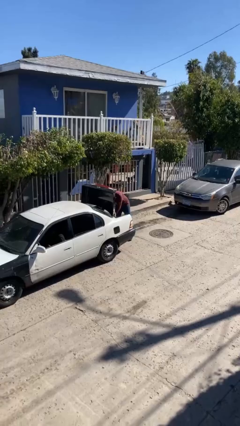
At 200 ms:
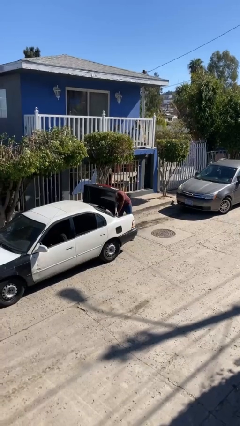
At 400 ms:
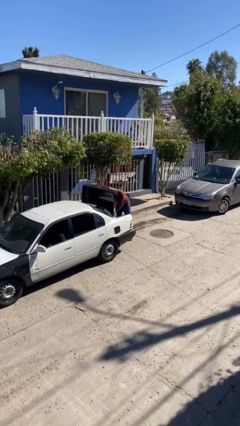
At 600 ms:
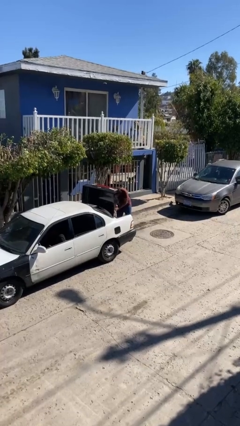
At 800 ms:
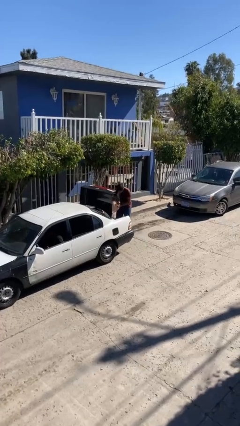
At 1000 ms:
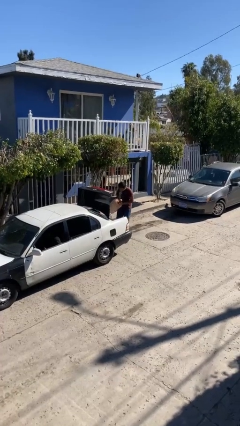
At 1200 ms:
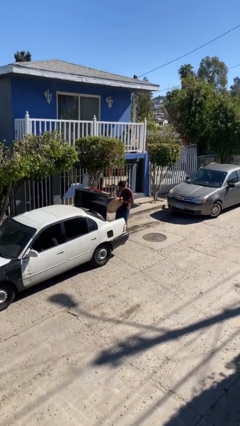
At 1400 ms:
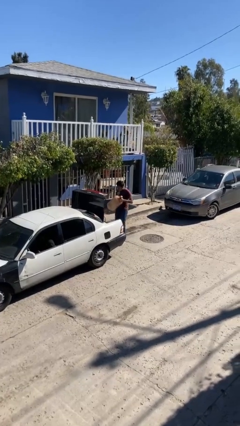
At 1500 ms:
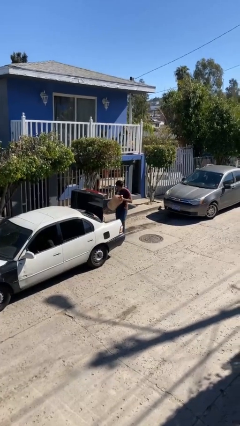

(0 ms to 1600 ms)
person unloads car

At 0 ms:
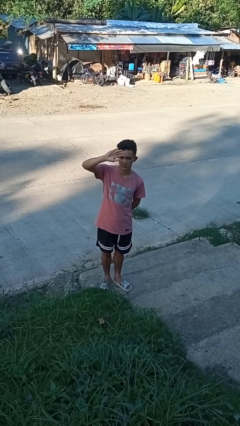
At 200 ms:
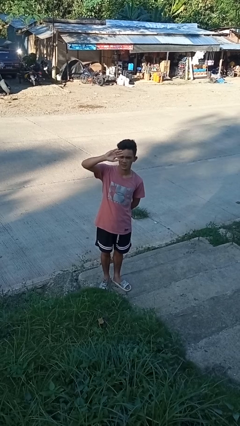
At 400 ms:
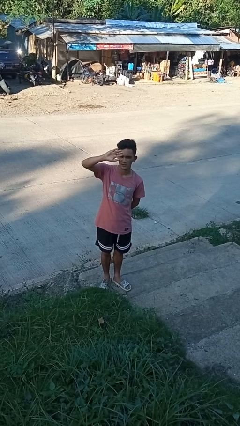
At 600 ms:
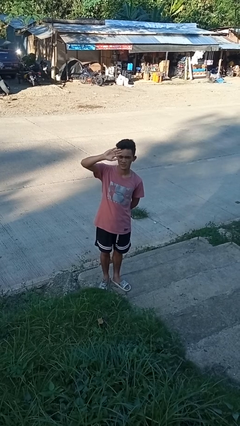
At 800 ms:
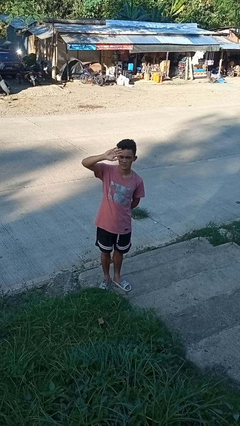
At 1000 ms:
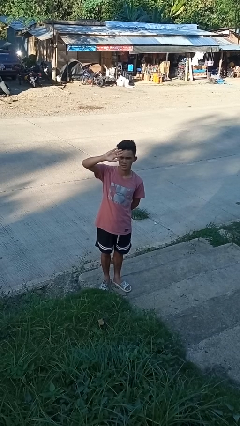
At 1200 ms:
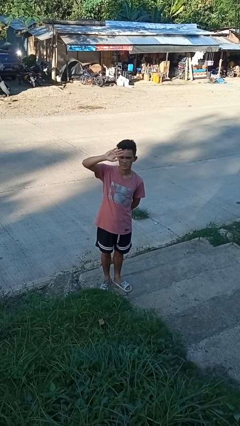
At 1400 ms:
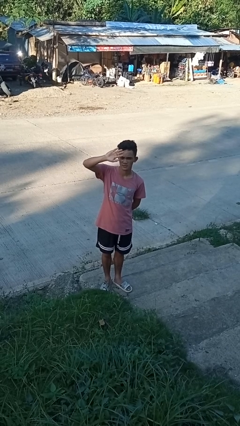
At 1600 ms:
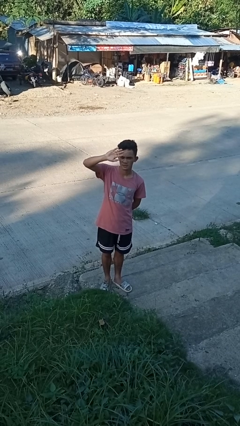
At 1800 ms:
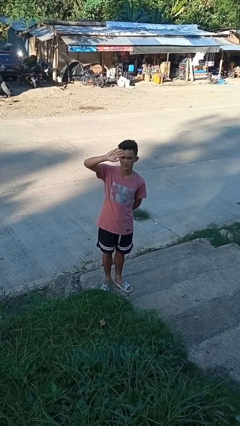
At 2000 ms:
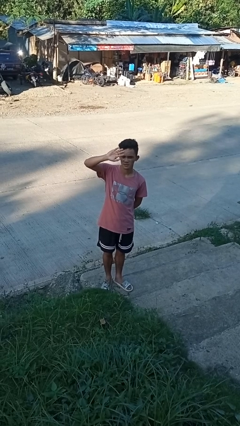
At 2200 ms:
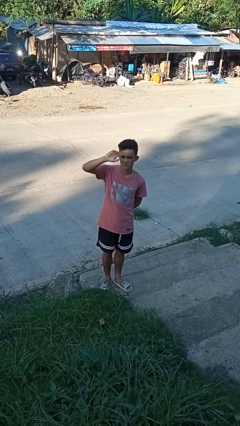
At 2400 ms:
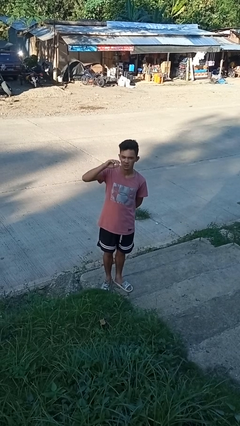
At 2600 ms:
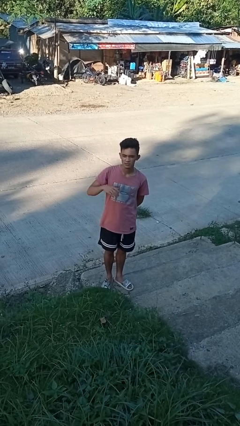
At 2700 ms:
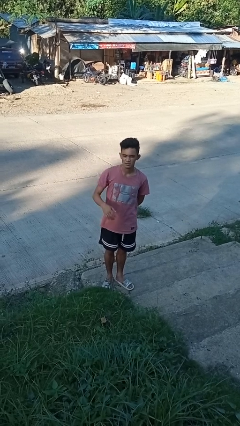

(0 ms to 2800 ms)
person shades eyes

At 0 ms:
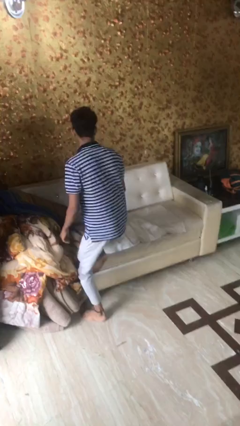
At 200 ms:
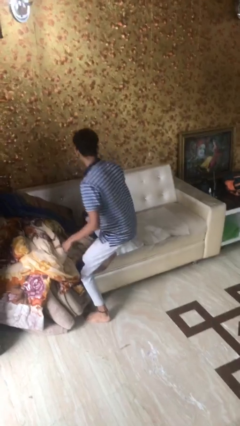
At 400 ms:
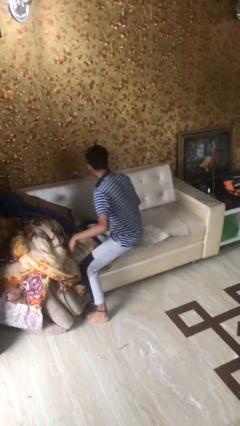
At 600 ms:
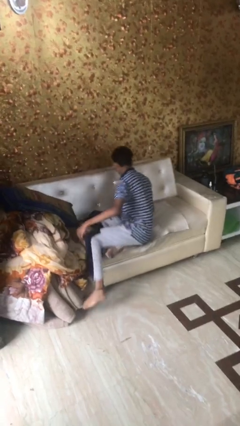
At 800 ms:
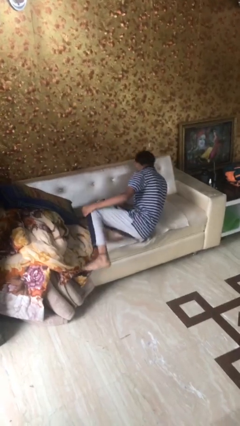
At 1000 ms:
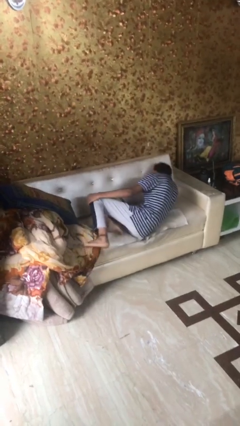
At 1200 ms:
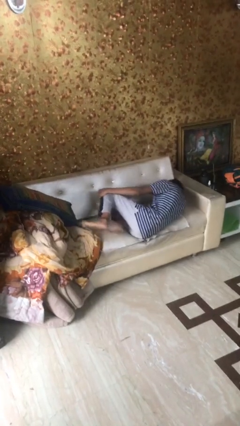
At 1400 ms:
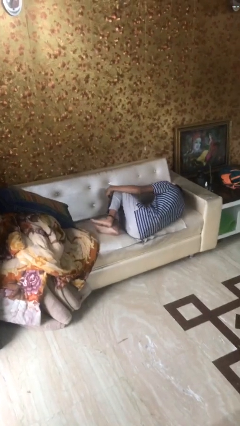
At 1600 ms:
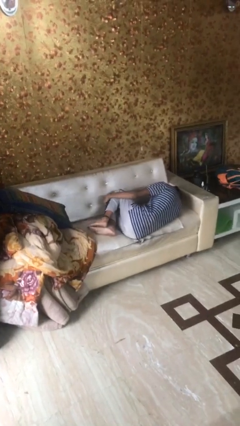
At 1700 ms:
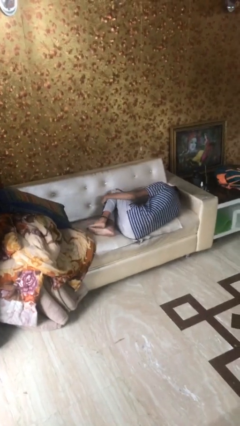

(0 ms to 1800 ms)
person lies down on couch

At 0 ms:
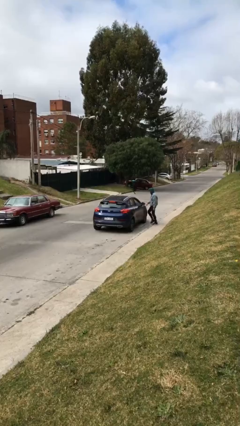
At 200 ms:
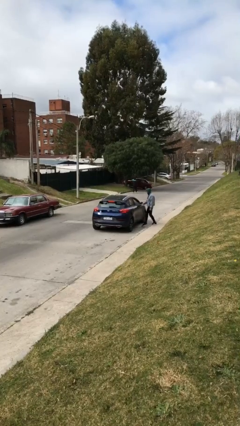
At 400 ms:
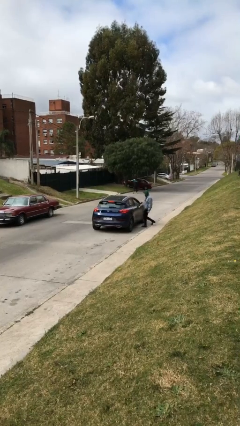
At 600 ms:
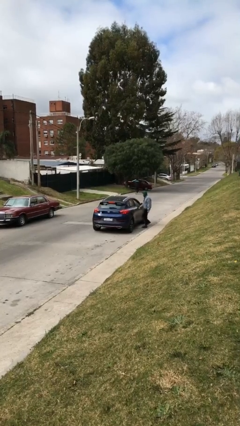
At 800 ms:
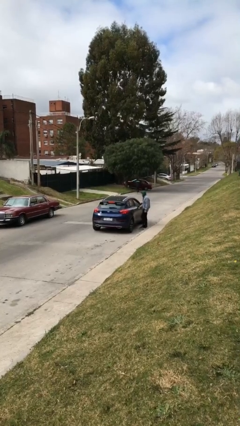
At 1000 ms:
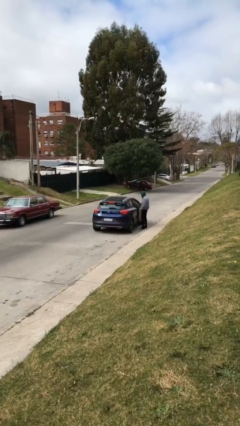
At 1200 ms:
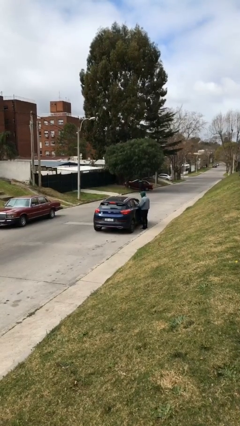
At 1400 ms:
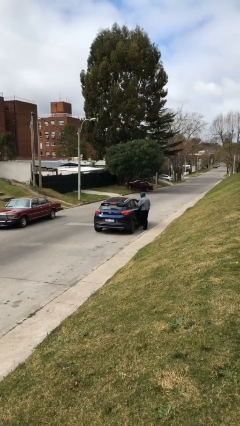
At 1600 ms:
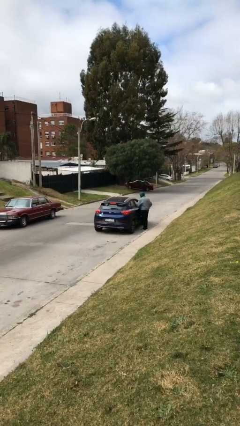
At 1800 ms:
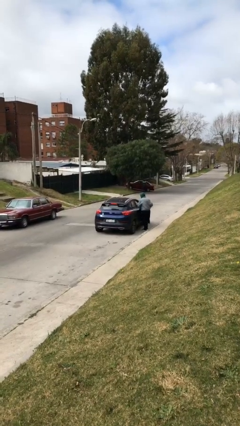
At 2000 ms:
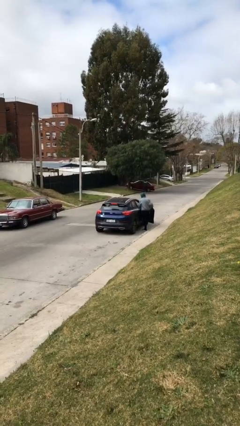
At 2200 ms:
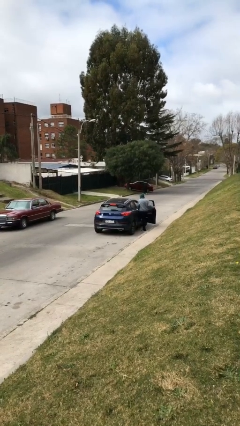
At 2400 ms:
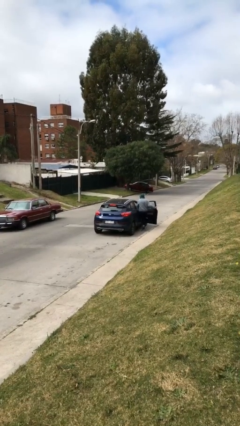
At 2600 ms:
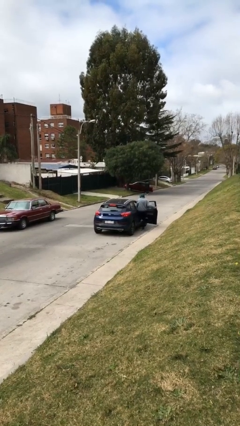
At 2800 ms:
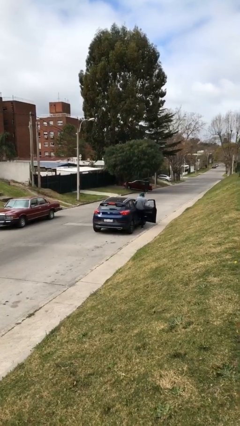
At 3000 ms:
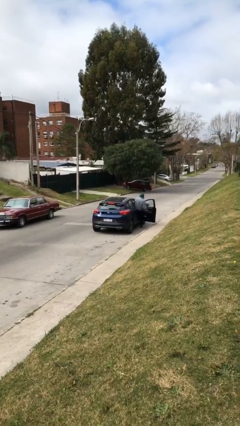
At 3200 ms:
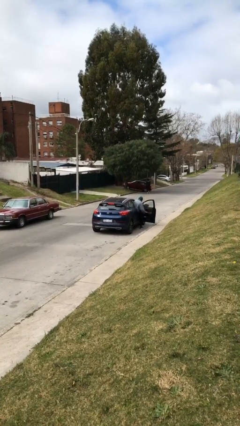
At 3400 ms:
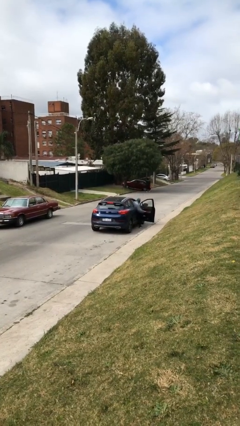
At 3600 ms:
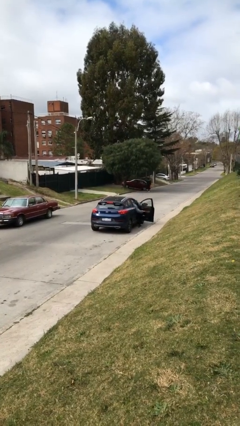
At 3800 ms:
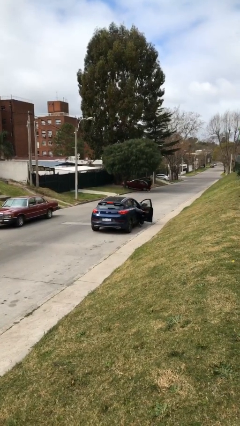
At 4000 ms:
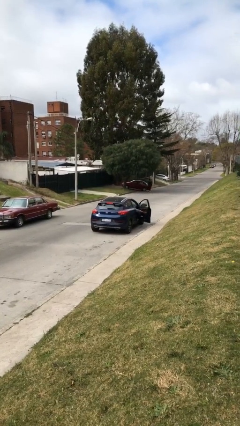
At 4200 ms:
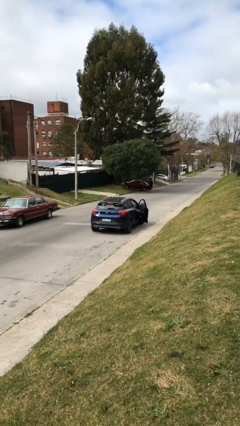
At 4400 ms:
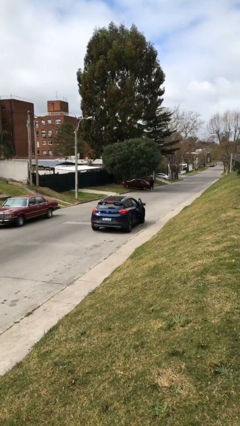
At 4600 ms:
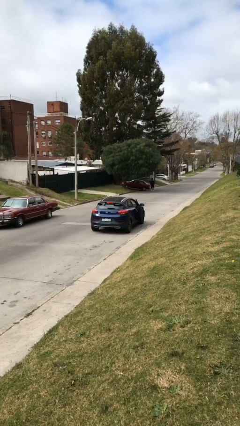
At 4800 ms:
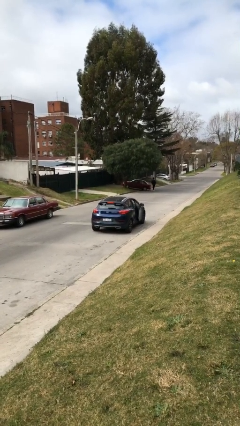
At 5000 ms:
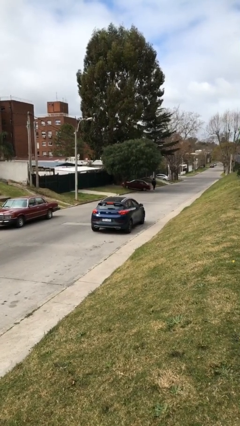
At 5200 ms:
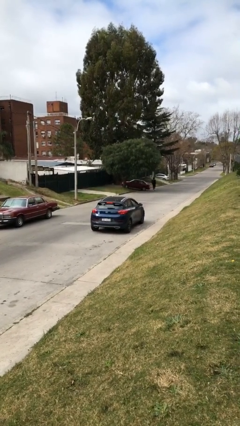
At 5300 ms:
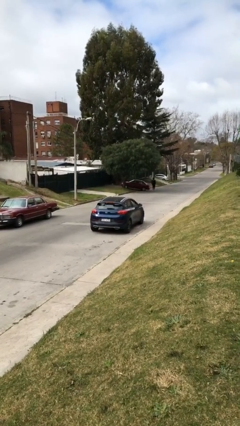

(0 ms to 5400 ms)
car picks up person

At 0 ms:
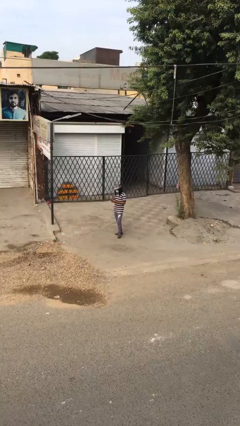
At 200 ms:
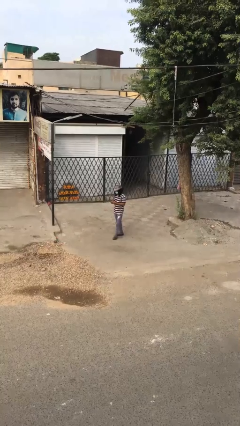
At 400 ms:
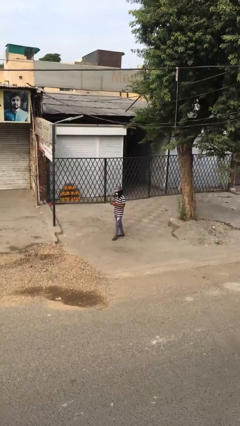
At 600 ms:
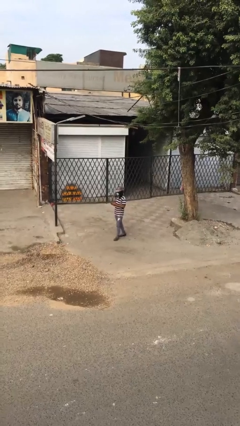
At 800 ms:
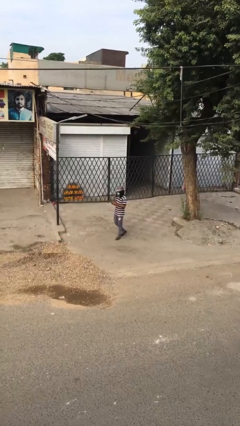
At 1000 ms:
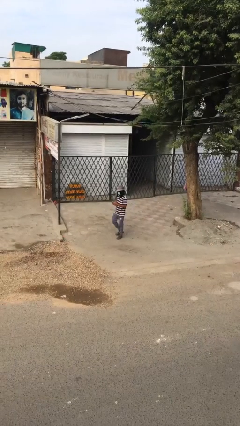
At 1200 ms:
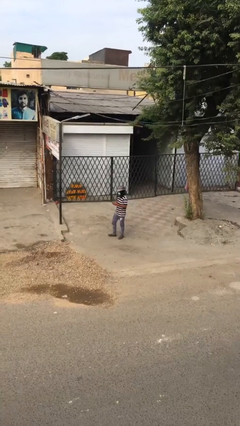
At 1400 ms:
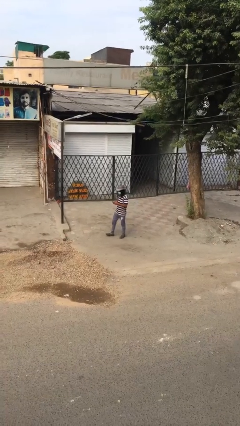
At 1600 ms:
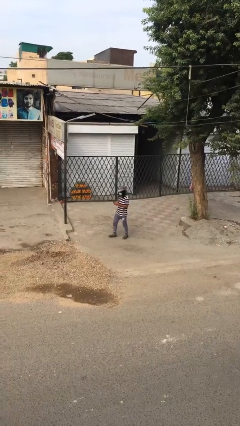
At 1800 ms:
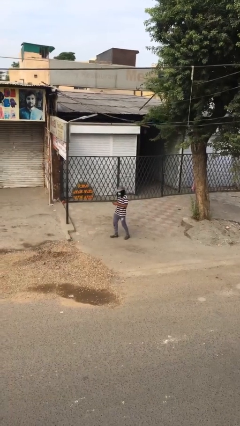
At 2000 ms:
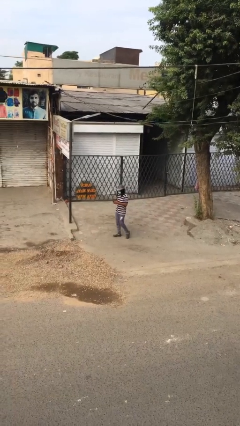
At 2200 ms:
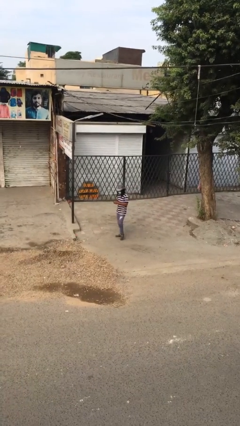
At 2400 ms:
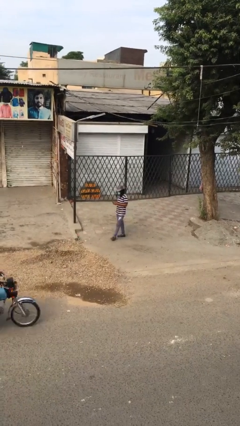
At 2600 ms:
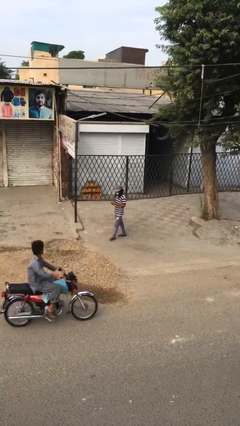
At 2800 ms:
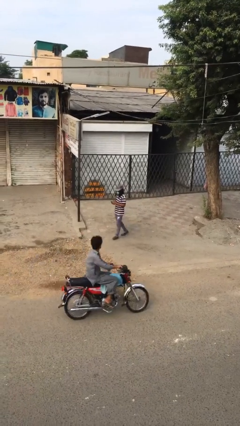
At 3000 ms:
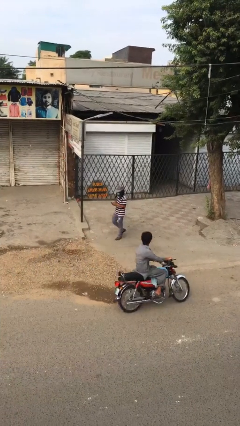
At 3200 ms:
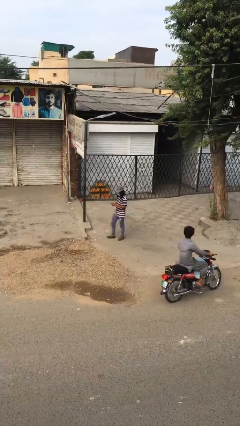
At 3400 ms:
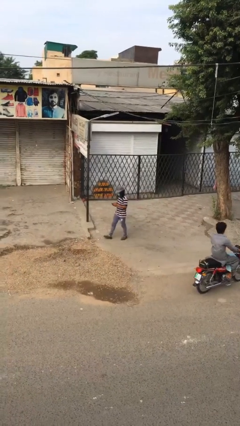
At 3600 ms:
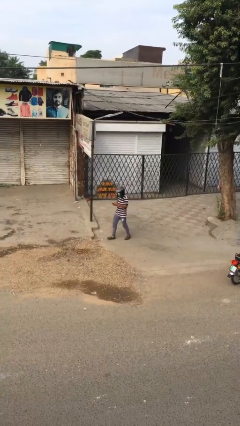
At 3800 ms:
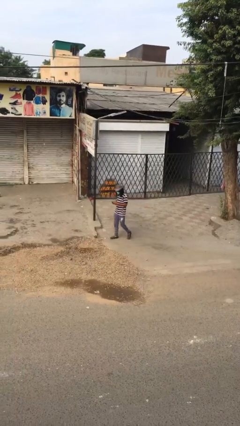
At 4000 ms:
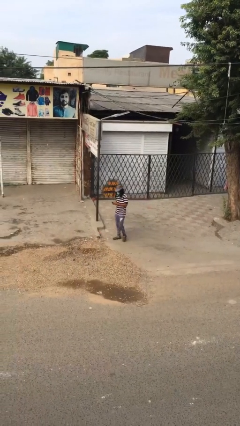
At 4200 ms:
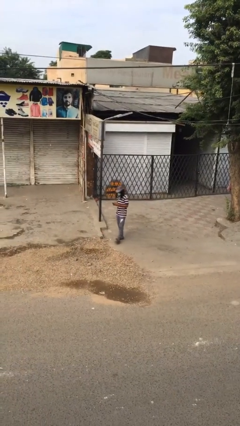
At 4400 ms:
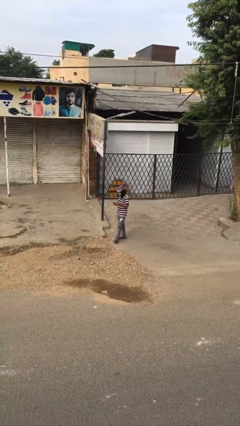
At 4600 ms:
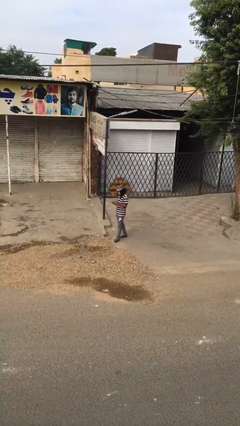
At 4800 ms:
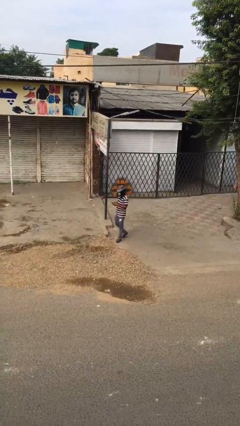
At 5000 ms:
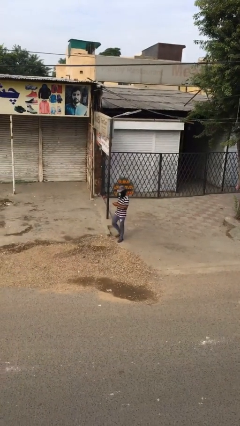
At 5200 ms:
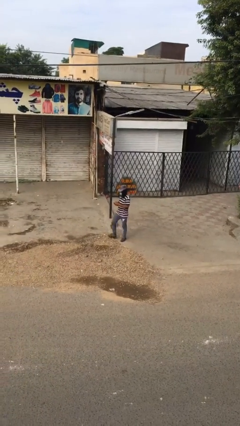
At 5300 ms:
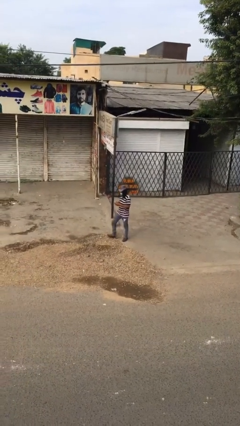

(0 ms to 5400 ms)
person texts on phone

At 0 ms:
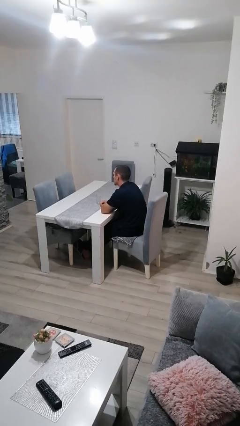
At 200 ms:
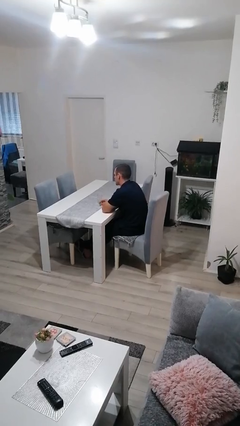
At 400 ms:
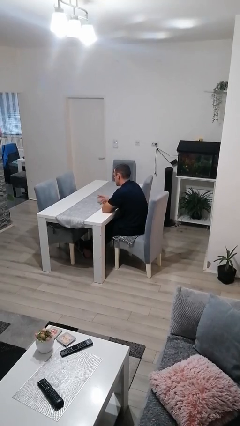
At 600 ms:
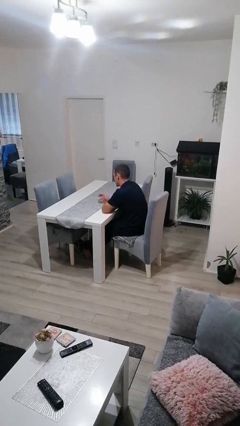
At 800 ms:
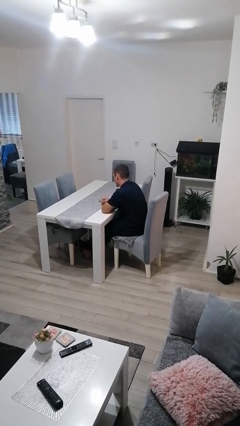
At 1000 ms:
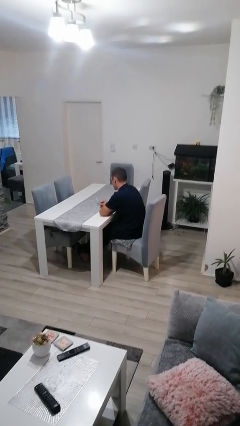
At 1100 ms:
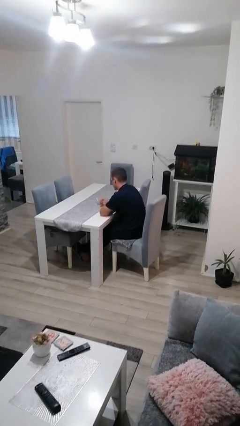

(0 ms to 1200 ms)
person knocks over glass
